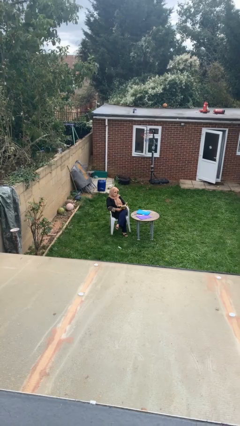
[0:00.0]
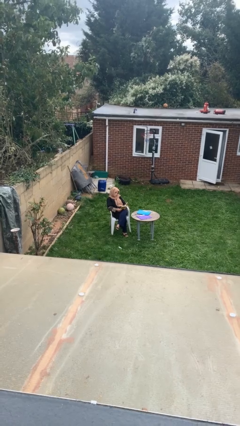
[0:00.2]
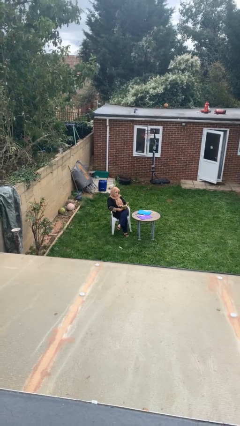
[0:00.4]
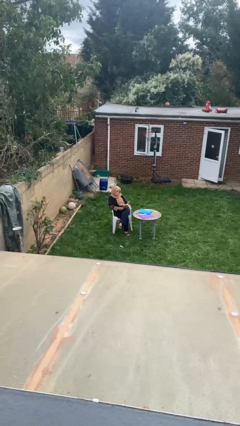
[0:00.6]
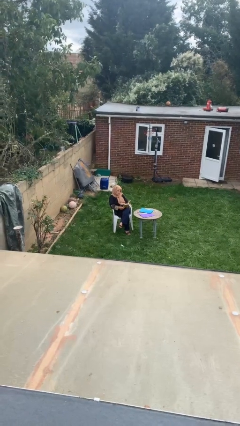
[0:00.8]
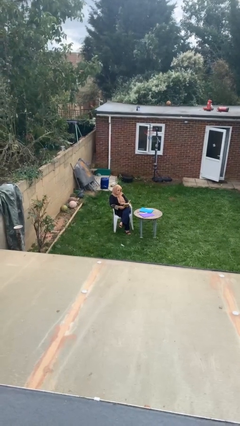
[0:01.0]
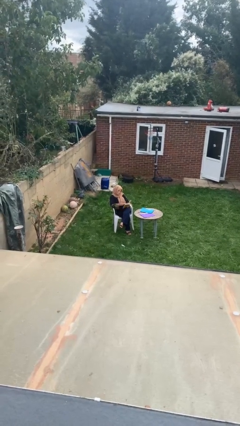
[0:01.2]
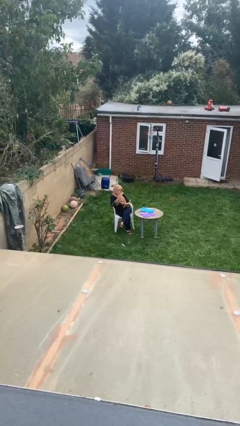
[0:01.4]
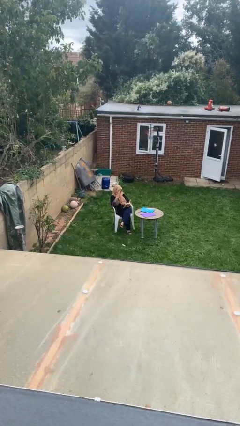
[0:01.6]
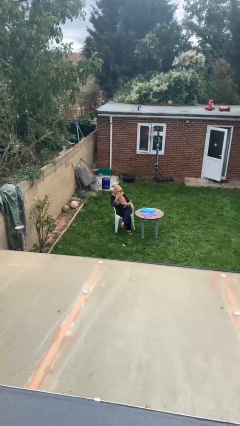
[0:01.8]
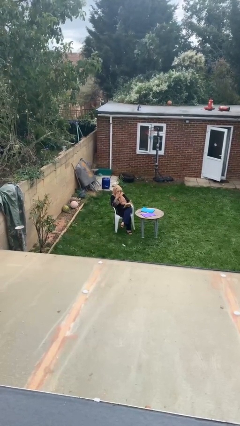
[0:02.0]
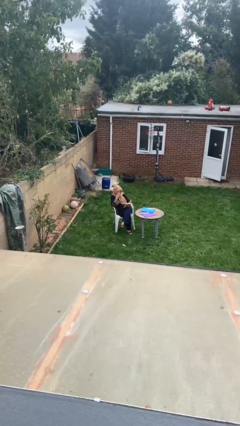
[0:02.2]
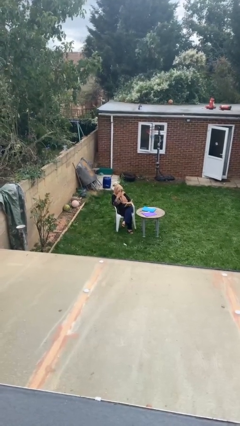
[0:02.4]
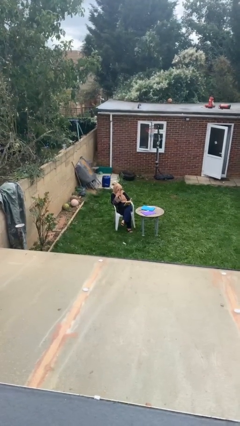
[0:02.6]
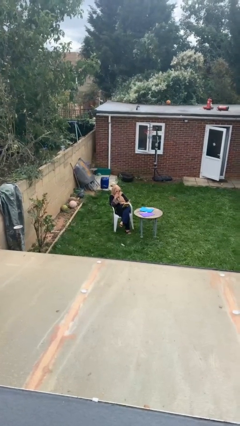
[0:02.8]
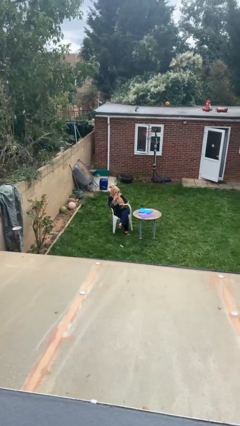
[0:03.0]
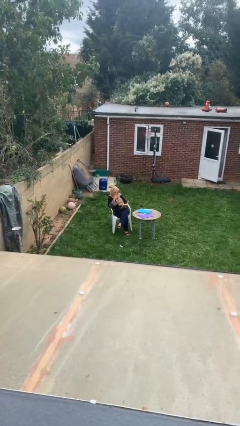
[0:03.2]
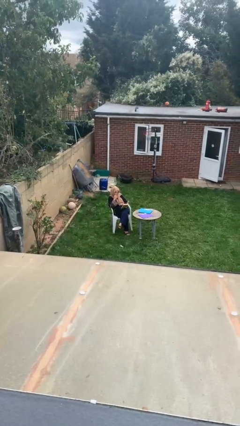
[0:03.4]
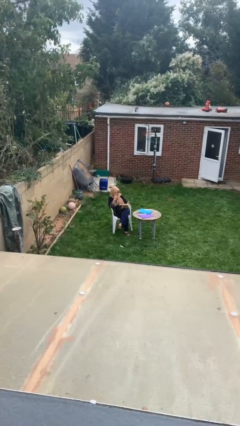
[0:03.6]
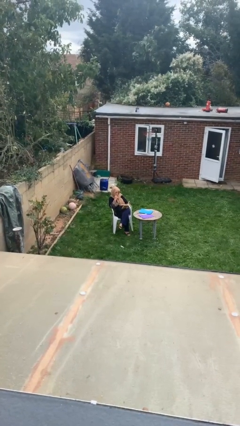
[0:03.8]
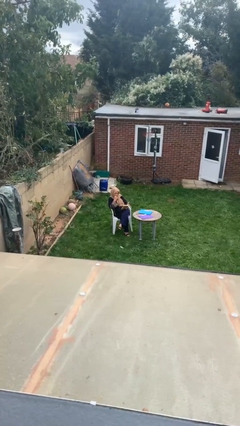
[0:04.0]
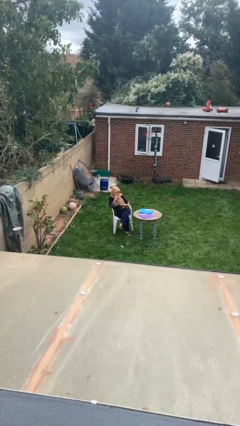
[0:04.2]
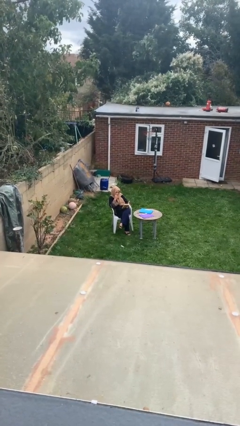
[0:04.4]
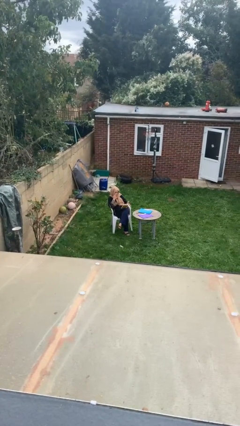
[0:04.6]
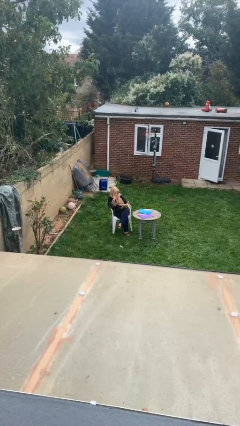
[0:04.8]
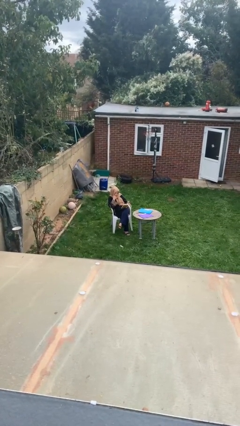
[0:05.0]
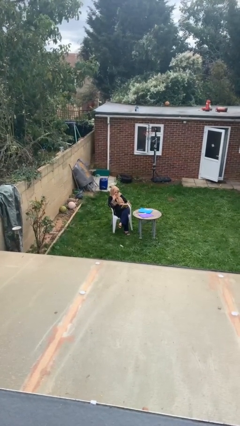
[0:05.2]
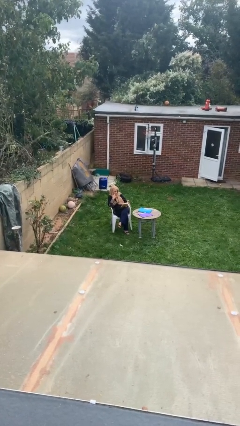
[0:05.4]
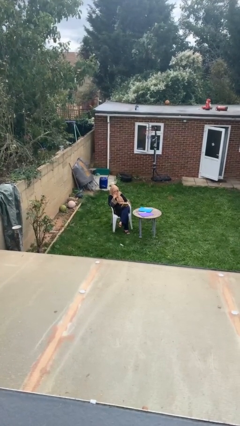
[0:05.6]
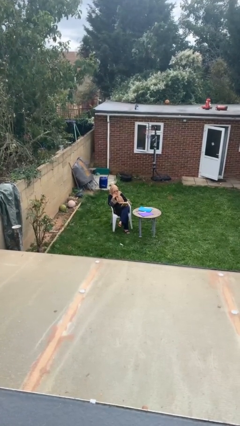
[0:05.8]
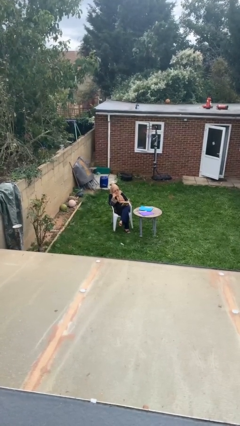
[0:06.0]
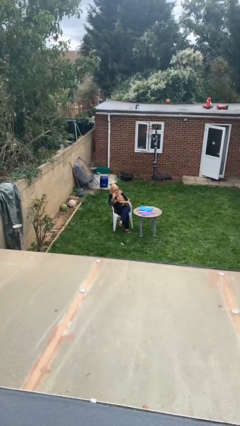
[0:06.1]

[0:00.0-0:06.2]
person reads document

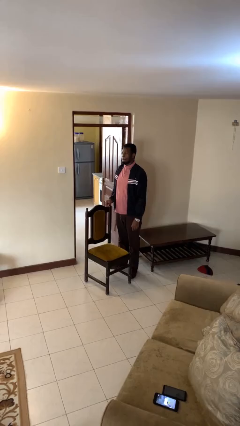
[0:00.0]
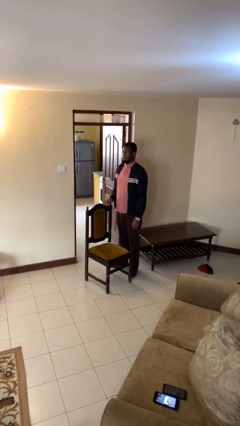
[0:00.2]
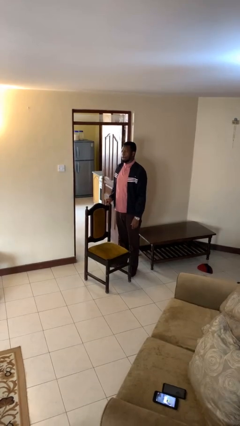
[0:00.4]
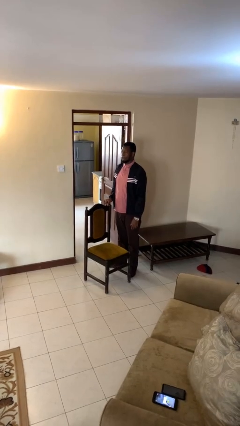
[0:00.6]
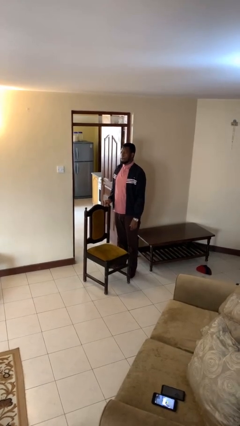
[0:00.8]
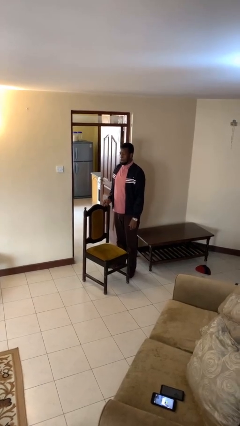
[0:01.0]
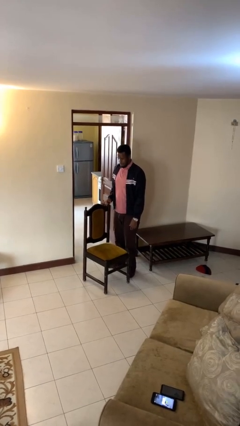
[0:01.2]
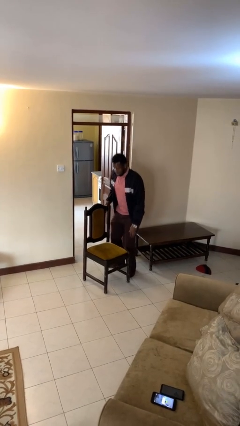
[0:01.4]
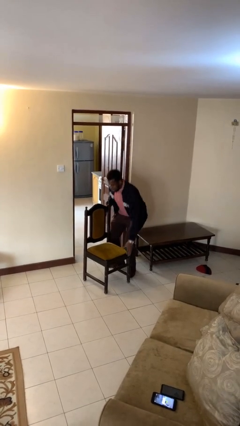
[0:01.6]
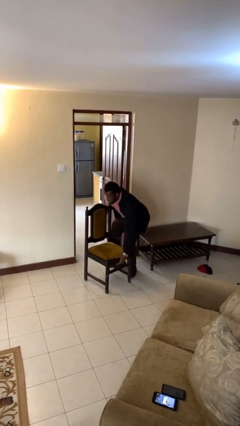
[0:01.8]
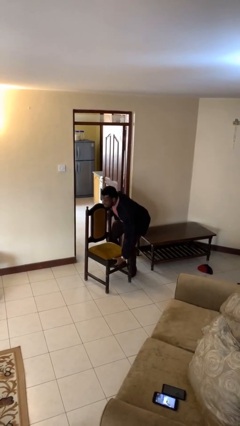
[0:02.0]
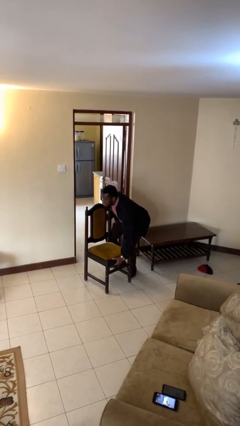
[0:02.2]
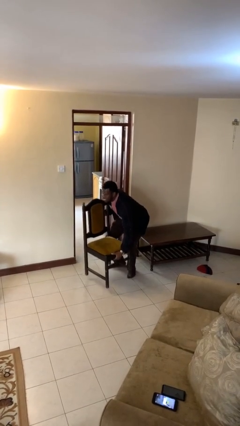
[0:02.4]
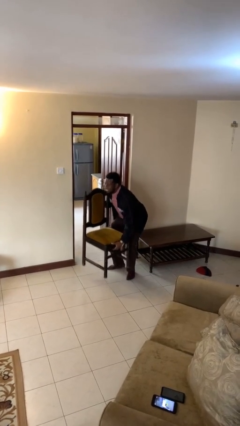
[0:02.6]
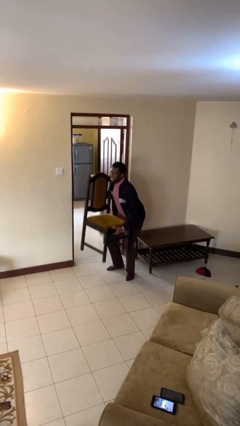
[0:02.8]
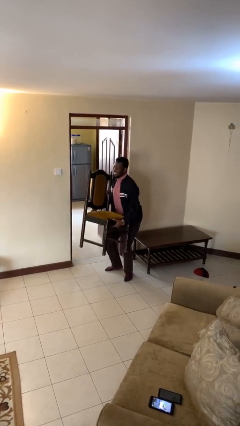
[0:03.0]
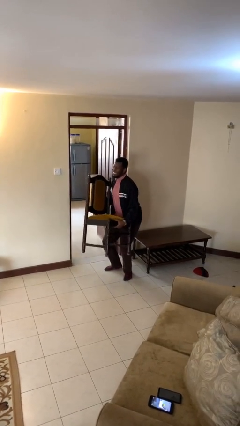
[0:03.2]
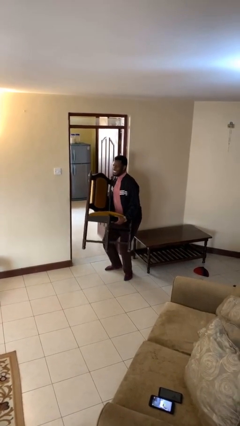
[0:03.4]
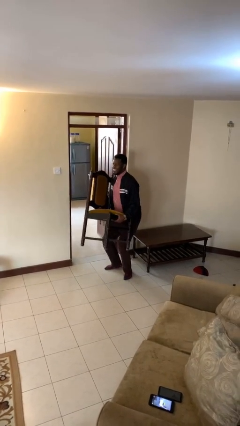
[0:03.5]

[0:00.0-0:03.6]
person picks up object from floor

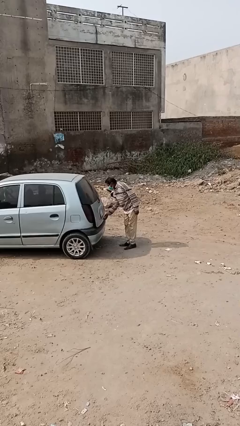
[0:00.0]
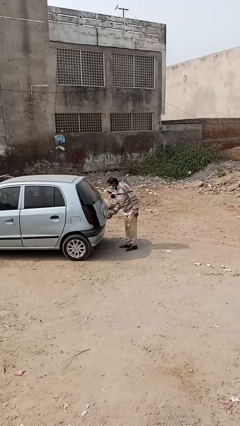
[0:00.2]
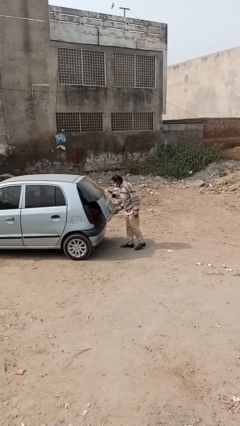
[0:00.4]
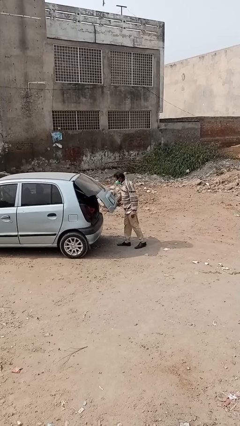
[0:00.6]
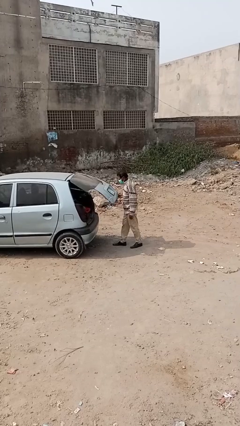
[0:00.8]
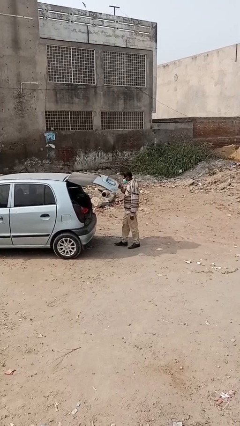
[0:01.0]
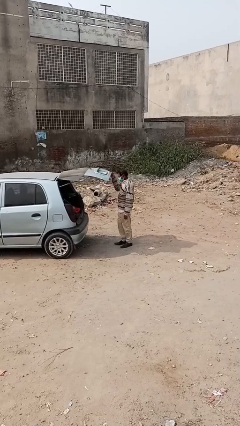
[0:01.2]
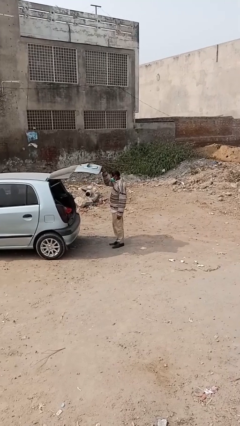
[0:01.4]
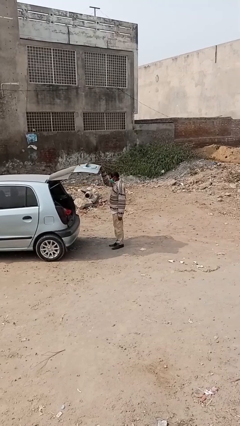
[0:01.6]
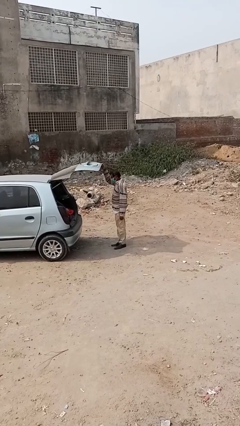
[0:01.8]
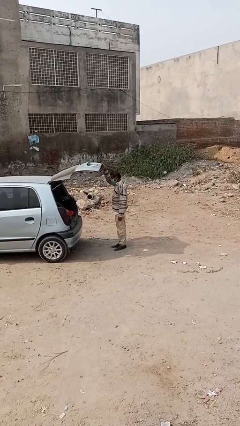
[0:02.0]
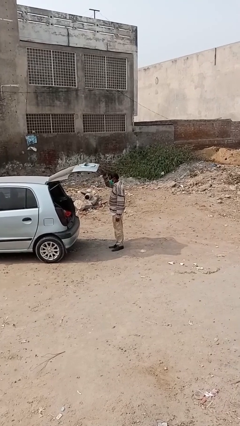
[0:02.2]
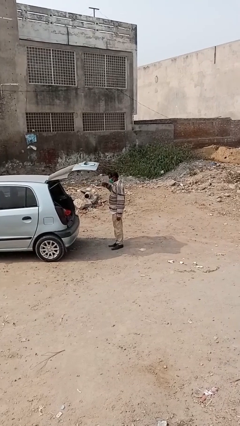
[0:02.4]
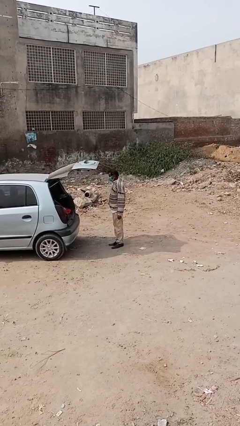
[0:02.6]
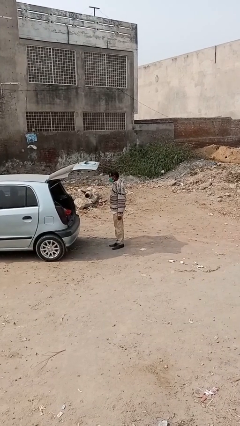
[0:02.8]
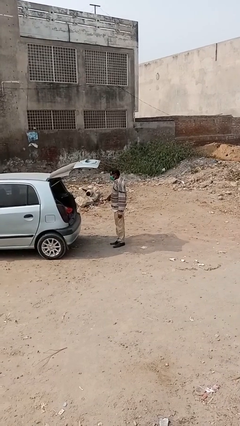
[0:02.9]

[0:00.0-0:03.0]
person opens car trunk

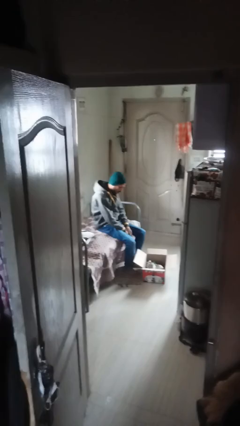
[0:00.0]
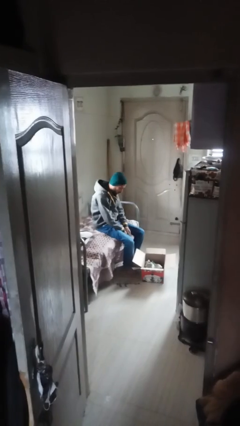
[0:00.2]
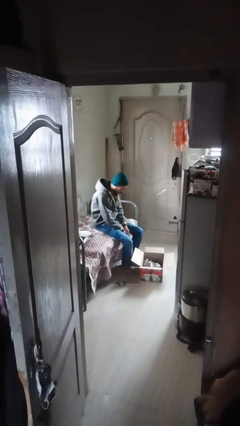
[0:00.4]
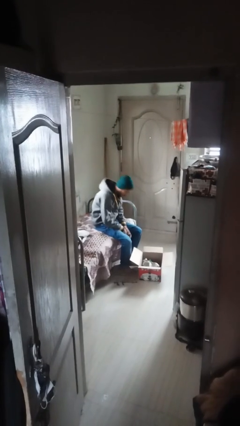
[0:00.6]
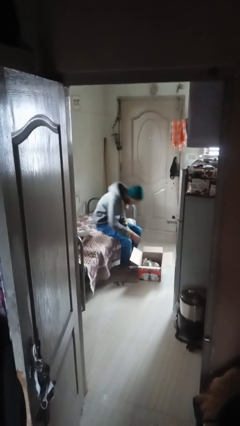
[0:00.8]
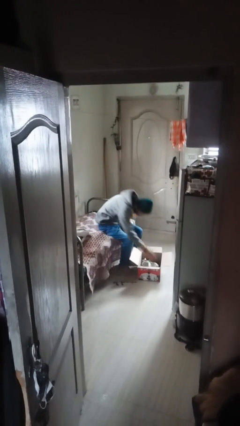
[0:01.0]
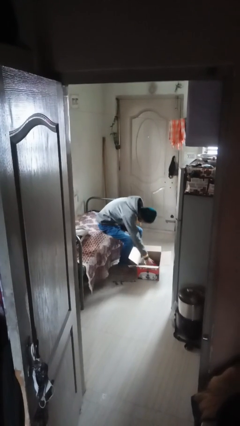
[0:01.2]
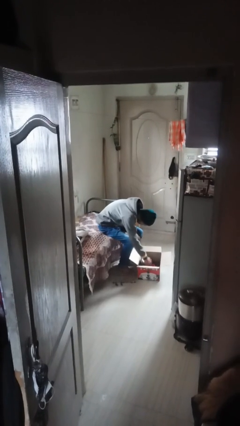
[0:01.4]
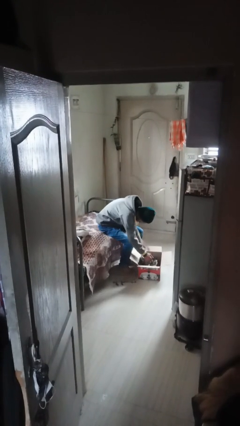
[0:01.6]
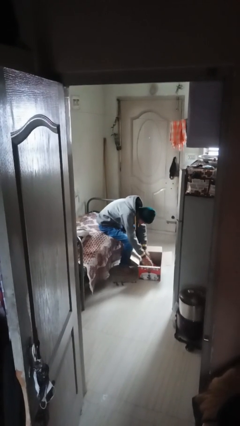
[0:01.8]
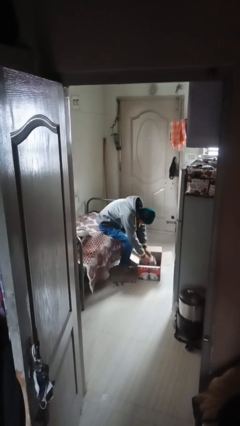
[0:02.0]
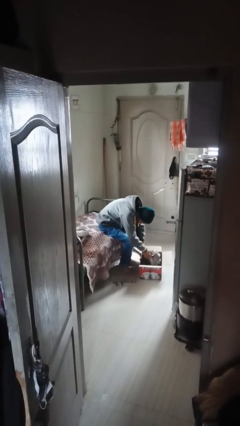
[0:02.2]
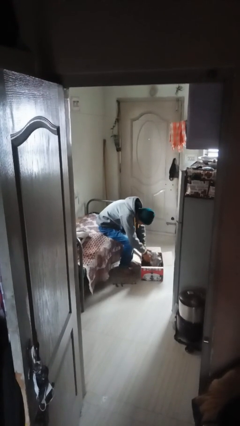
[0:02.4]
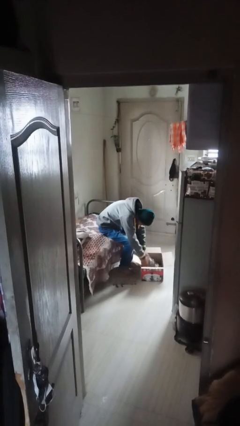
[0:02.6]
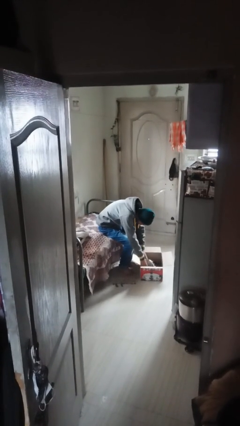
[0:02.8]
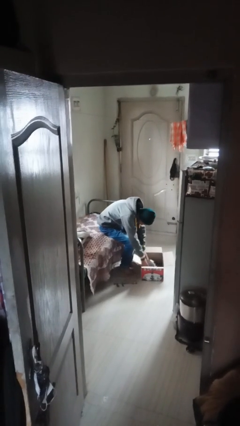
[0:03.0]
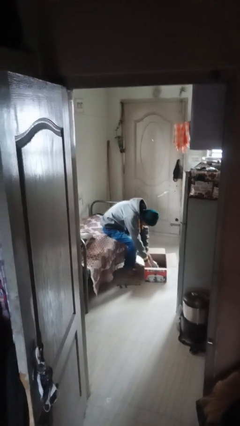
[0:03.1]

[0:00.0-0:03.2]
person searches in box

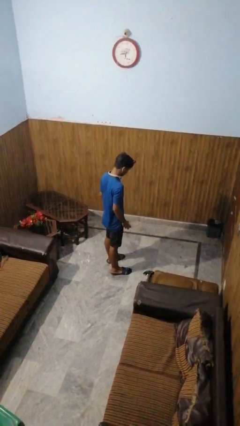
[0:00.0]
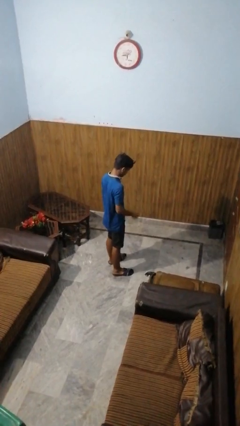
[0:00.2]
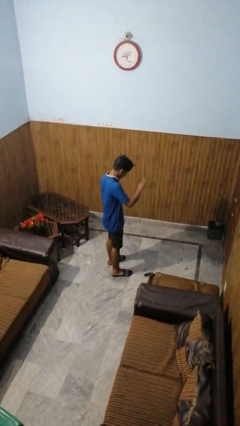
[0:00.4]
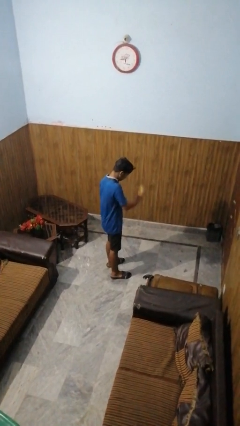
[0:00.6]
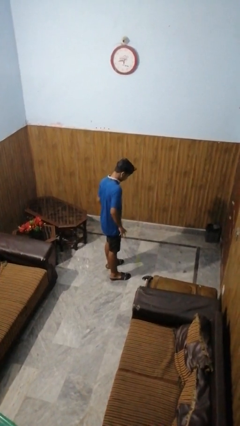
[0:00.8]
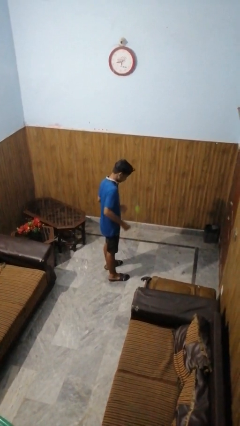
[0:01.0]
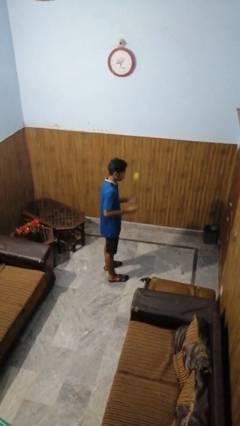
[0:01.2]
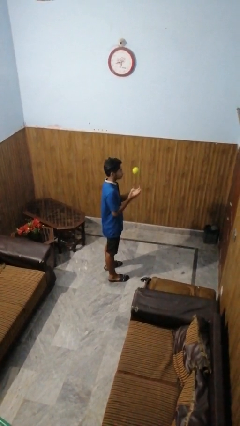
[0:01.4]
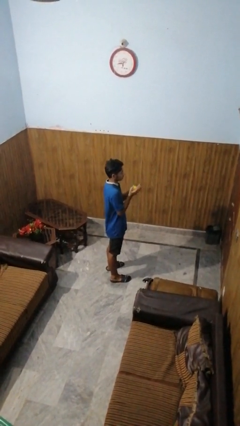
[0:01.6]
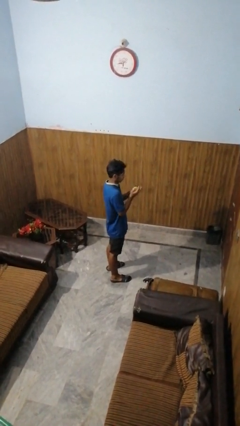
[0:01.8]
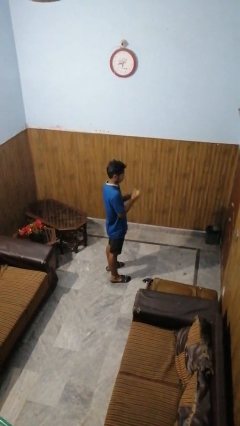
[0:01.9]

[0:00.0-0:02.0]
person bounces ball on floor
